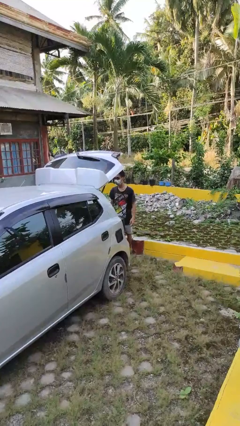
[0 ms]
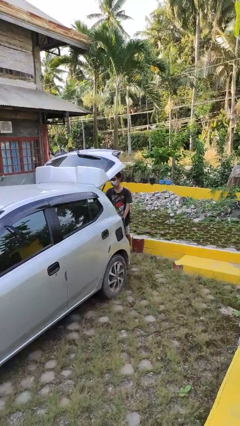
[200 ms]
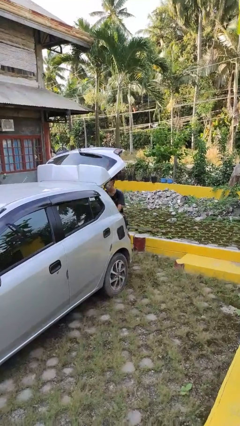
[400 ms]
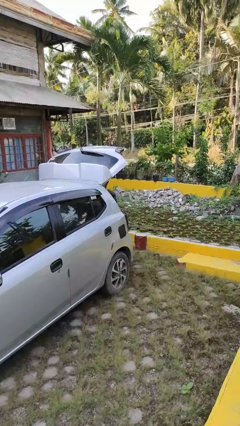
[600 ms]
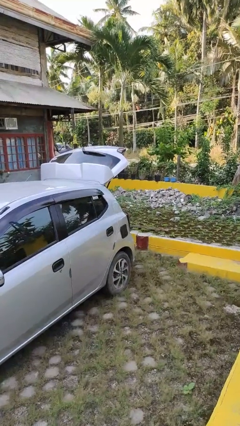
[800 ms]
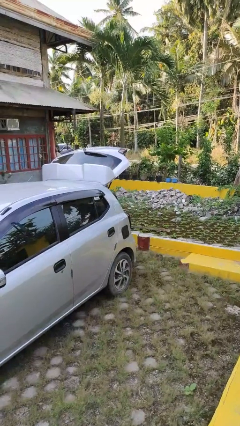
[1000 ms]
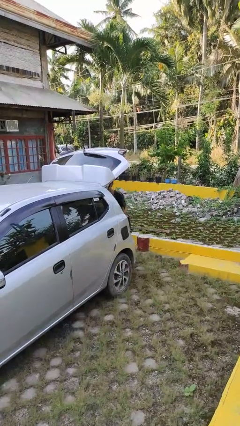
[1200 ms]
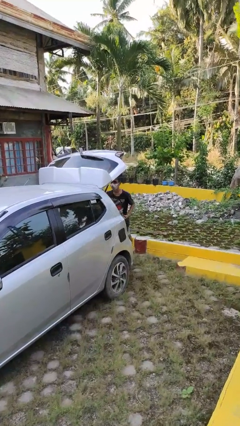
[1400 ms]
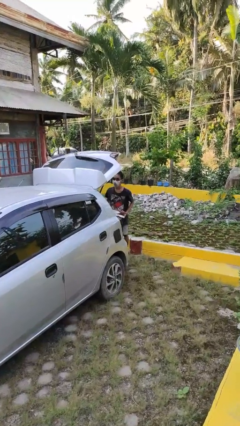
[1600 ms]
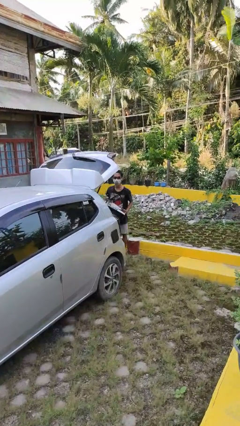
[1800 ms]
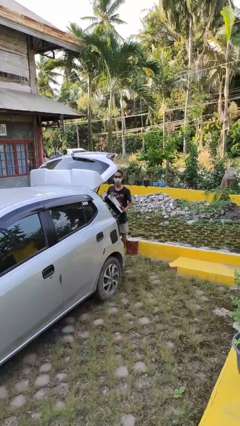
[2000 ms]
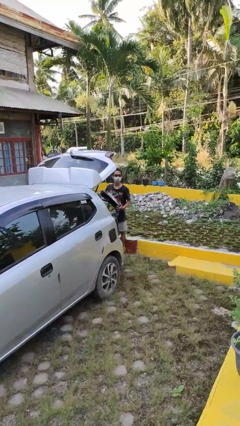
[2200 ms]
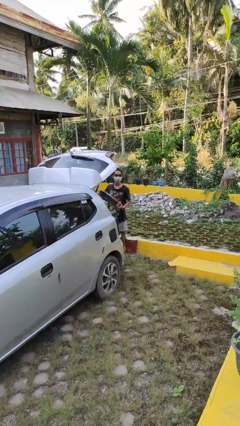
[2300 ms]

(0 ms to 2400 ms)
person unloads car

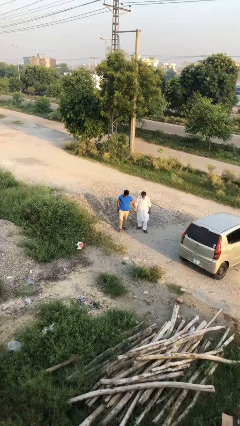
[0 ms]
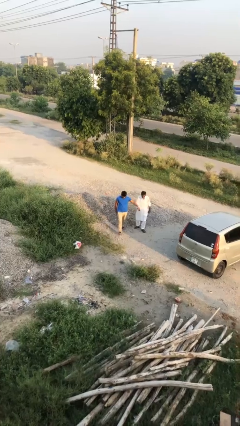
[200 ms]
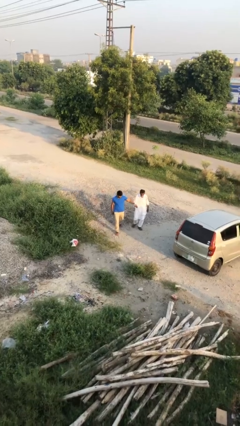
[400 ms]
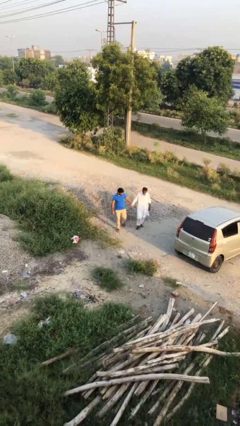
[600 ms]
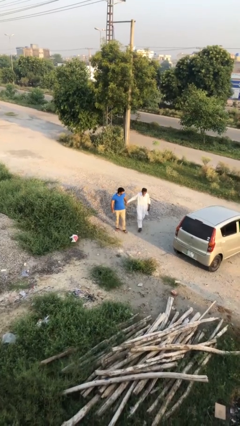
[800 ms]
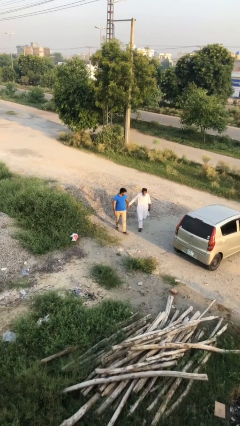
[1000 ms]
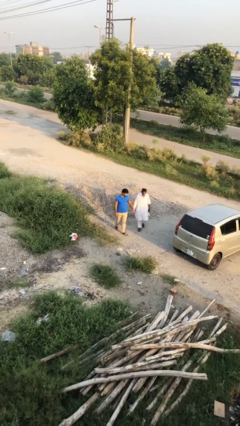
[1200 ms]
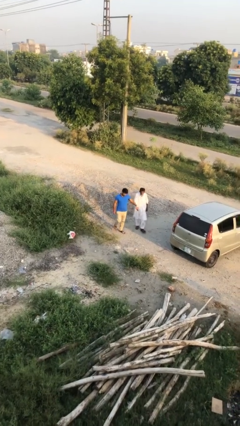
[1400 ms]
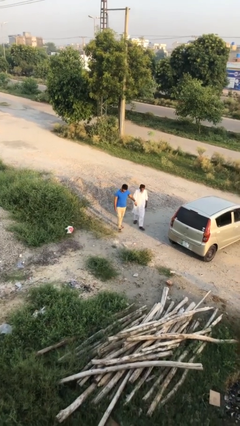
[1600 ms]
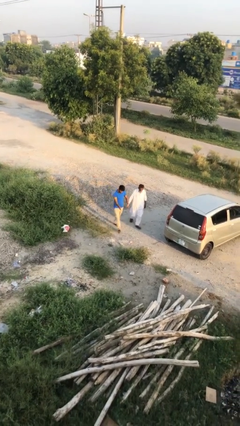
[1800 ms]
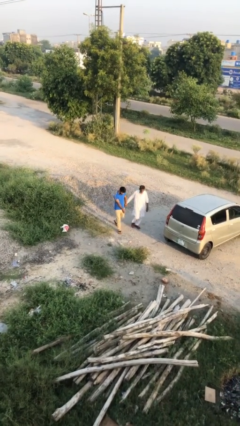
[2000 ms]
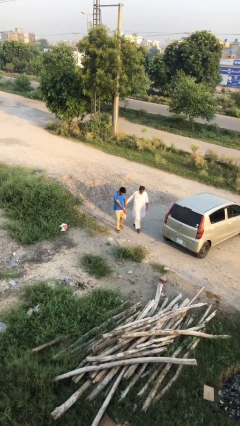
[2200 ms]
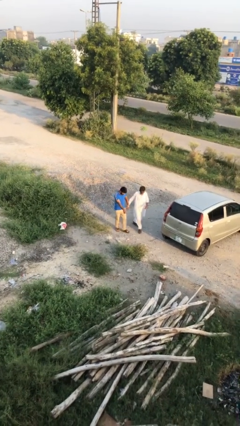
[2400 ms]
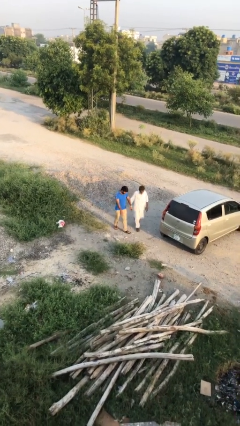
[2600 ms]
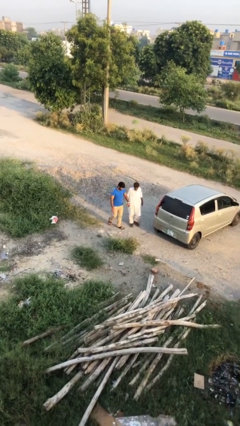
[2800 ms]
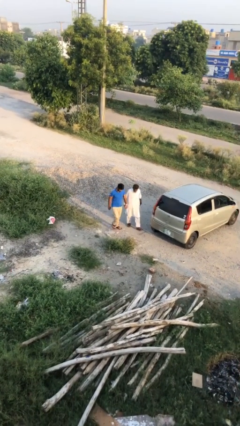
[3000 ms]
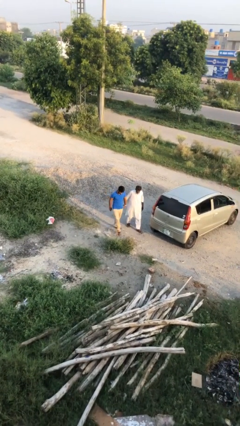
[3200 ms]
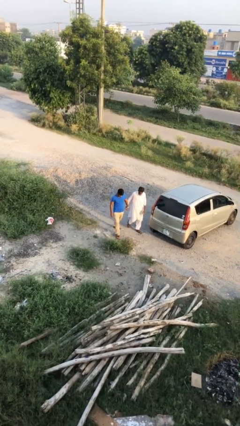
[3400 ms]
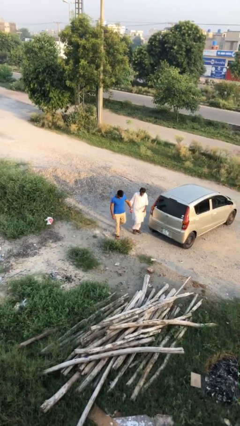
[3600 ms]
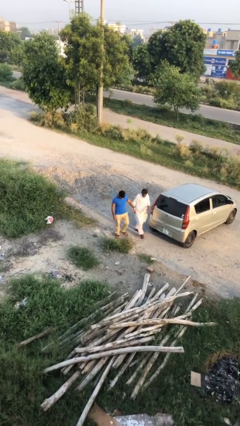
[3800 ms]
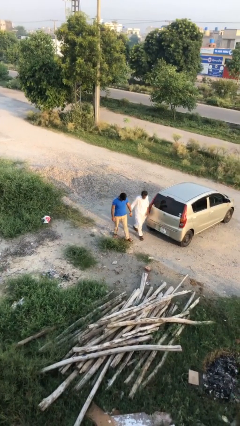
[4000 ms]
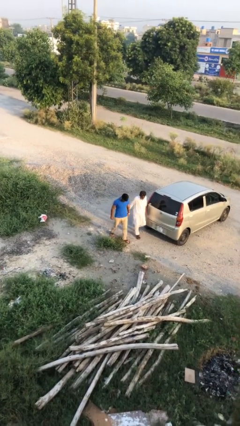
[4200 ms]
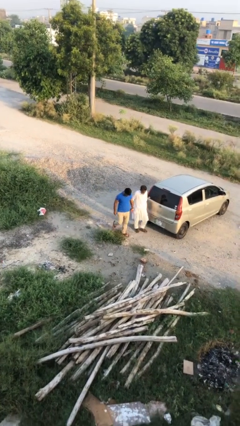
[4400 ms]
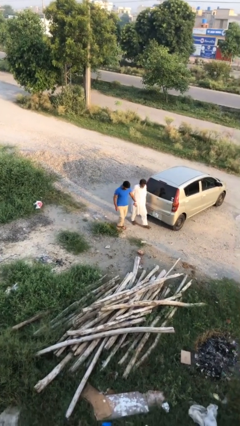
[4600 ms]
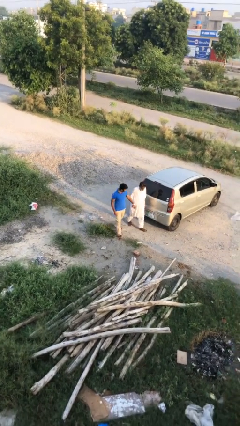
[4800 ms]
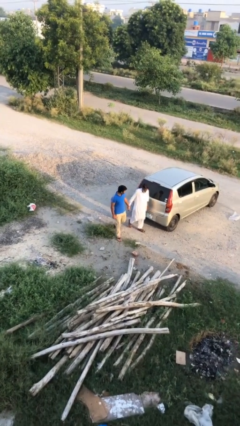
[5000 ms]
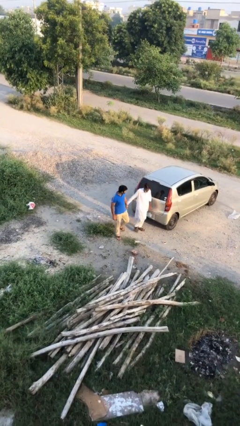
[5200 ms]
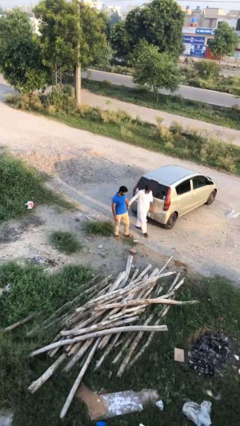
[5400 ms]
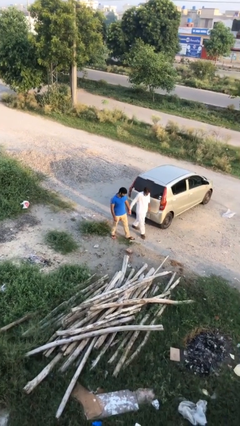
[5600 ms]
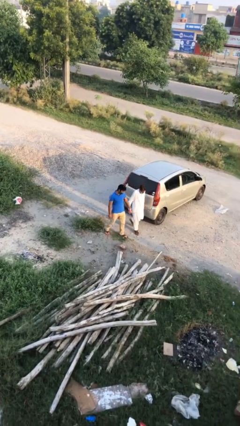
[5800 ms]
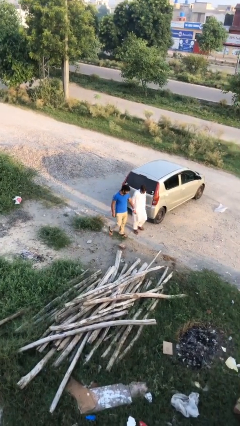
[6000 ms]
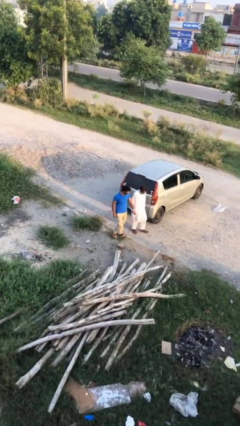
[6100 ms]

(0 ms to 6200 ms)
person holds hand

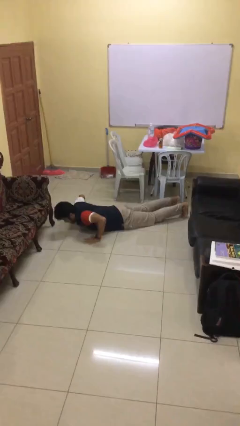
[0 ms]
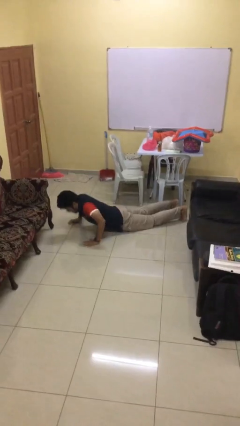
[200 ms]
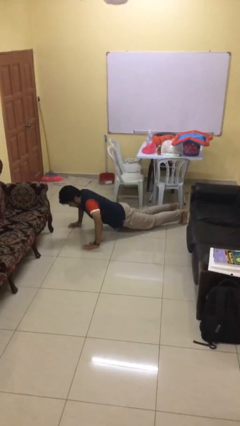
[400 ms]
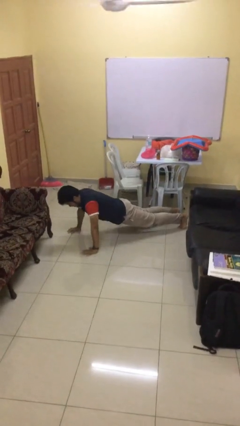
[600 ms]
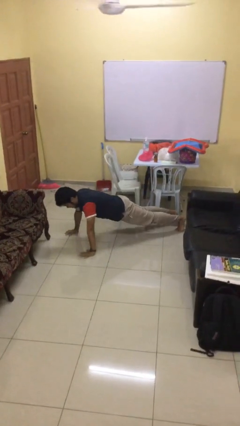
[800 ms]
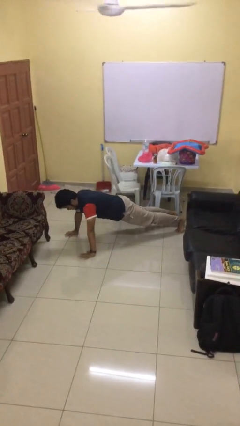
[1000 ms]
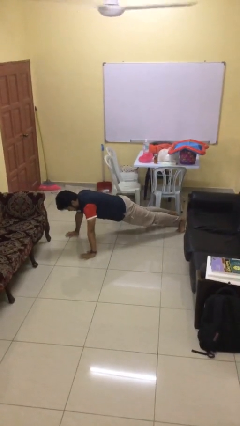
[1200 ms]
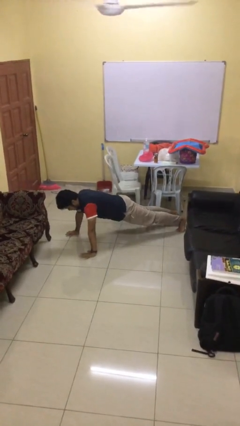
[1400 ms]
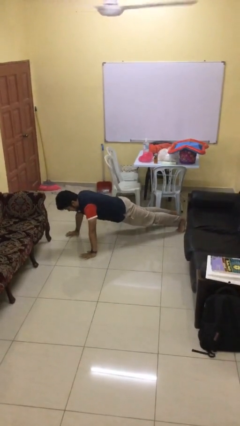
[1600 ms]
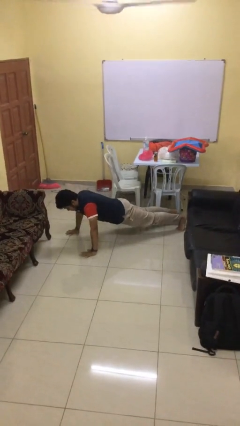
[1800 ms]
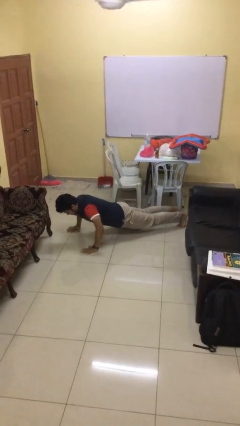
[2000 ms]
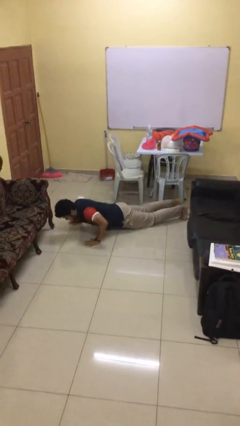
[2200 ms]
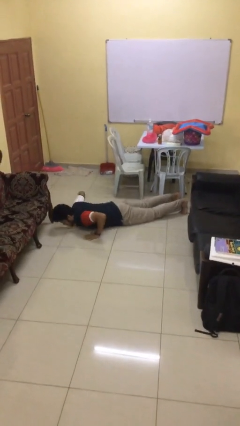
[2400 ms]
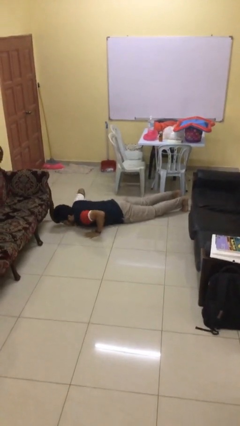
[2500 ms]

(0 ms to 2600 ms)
person exercises with pushup

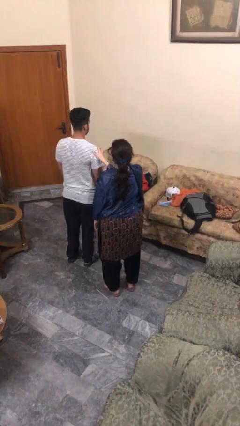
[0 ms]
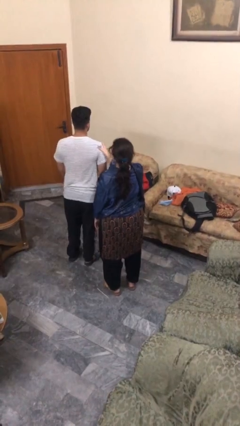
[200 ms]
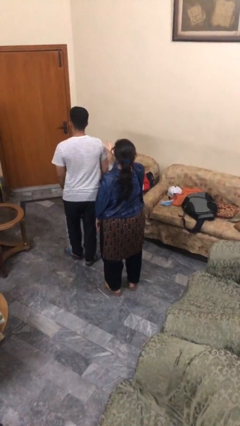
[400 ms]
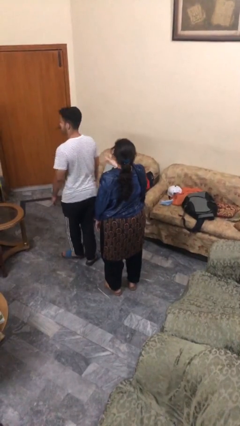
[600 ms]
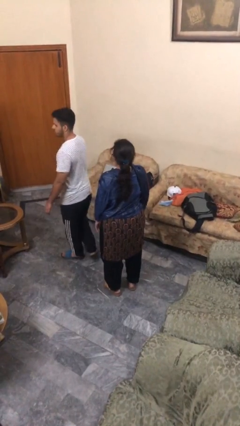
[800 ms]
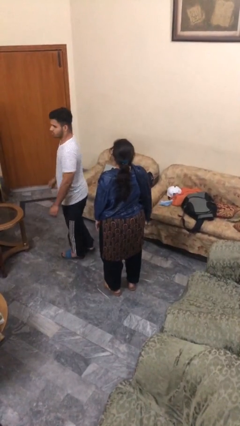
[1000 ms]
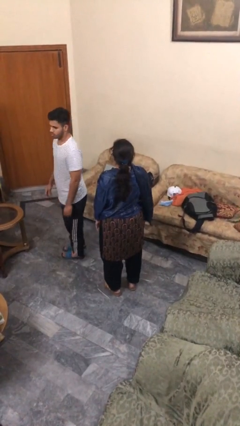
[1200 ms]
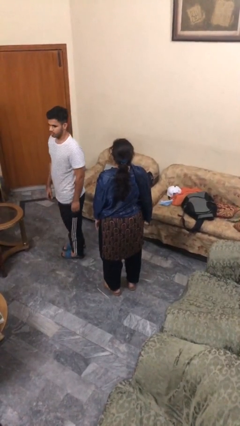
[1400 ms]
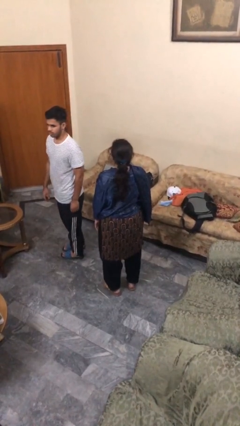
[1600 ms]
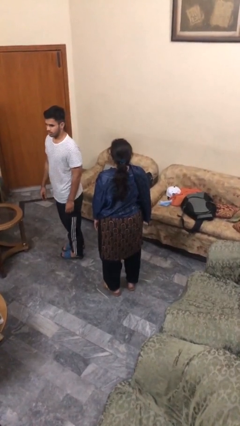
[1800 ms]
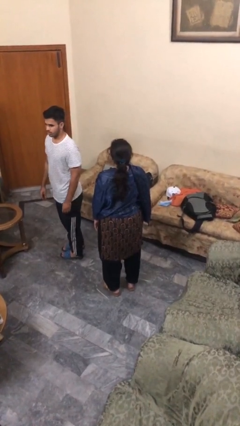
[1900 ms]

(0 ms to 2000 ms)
person spins person around

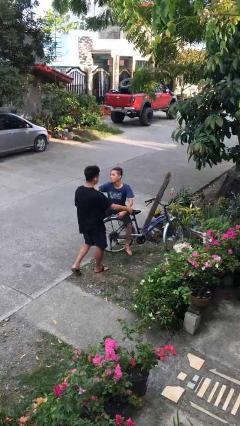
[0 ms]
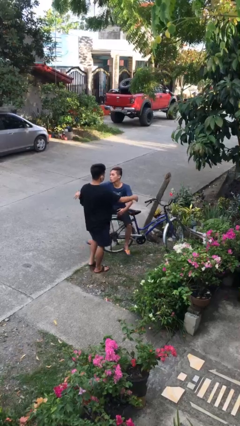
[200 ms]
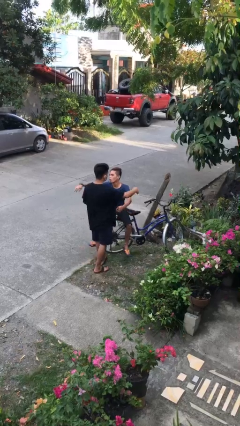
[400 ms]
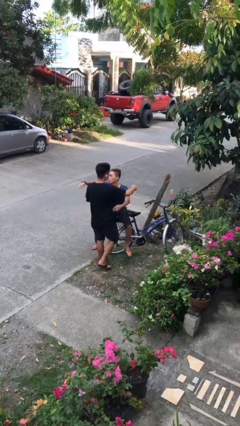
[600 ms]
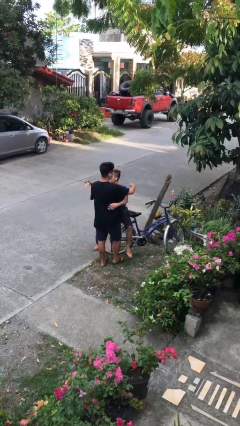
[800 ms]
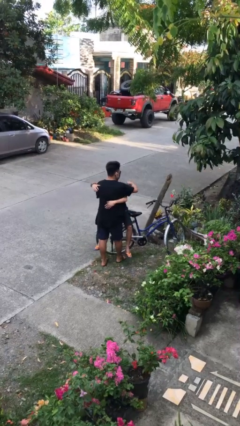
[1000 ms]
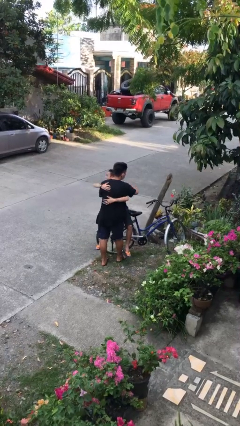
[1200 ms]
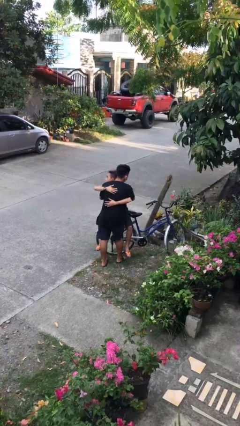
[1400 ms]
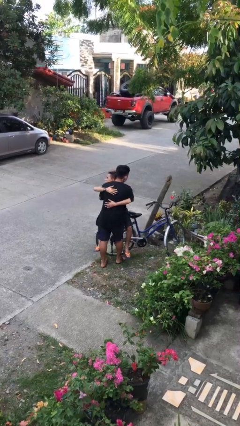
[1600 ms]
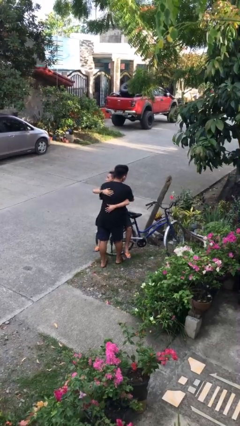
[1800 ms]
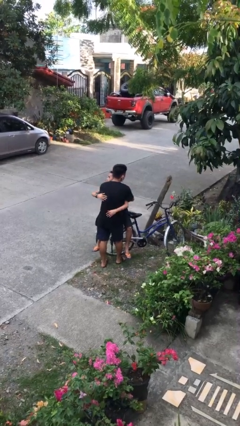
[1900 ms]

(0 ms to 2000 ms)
person embraces person

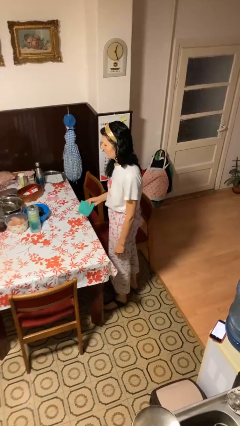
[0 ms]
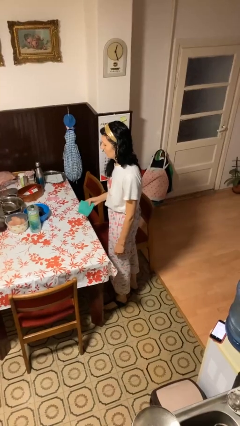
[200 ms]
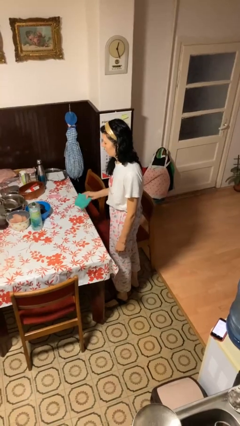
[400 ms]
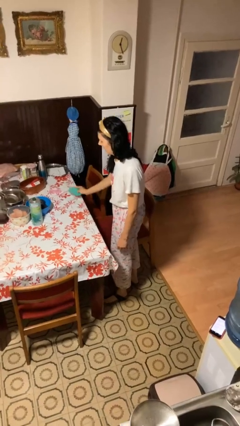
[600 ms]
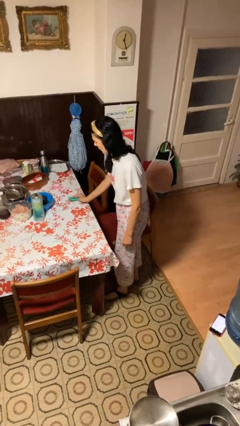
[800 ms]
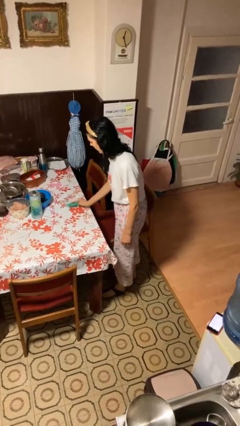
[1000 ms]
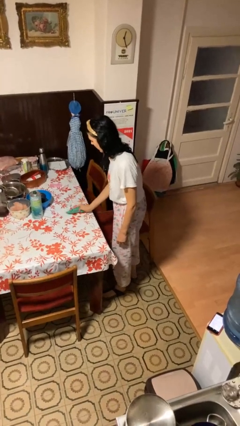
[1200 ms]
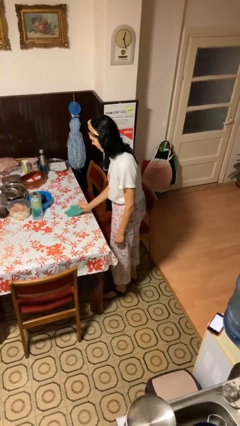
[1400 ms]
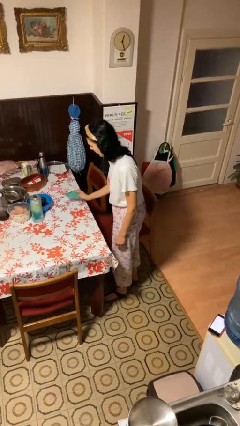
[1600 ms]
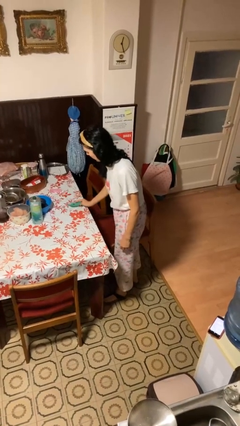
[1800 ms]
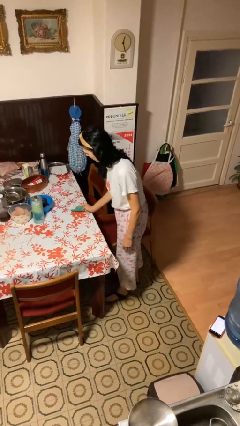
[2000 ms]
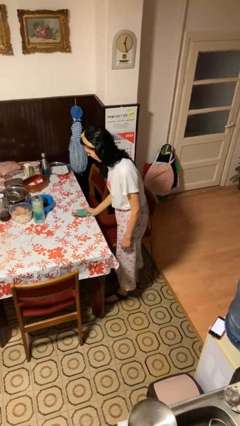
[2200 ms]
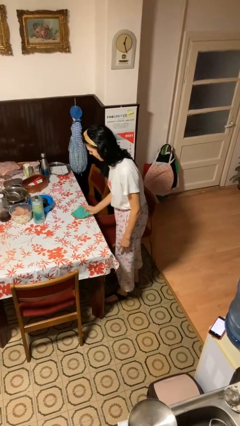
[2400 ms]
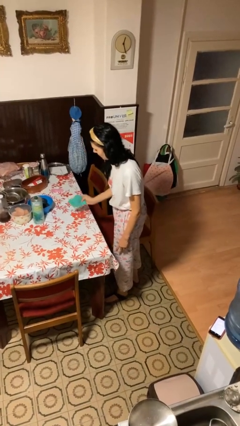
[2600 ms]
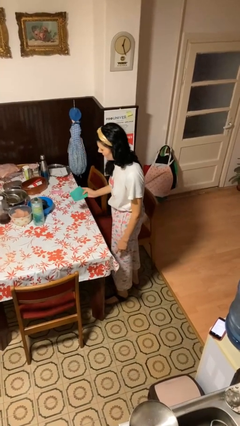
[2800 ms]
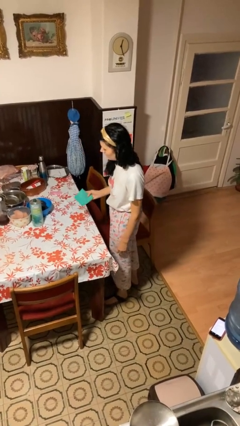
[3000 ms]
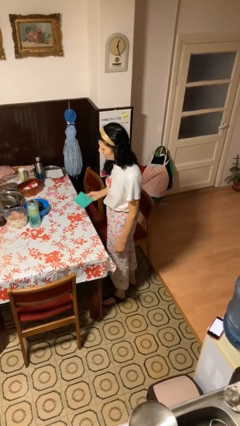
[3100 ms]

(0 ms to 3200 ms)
person cleans table with rag
